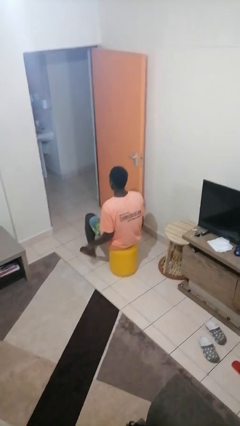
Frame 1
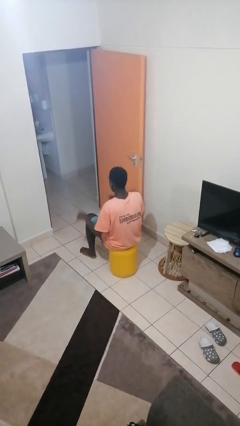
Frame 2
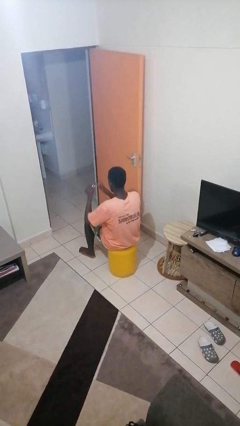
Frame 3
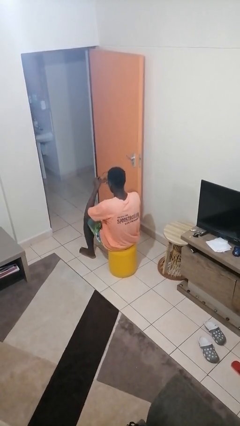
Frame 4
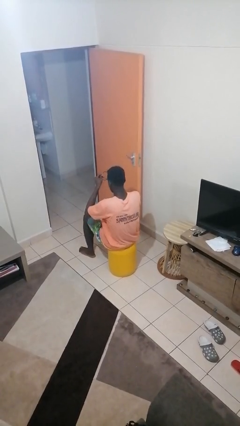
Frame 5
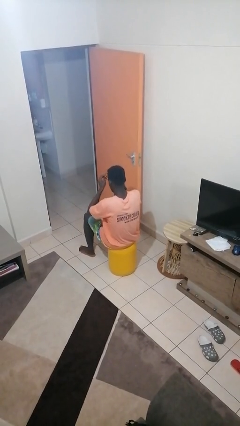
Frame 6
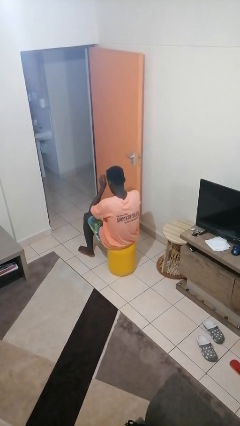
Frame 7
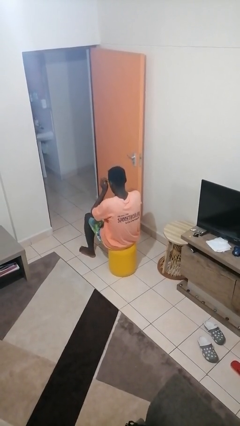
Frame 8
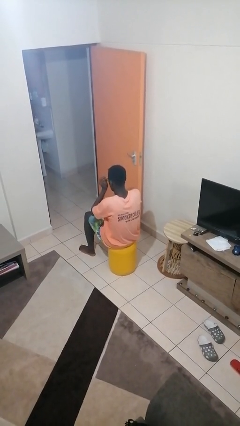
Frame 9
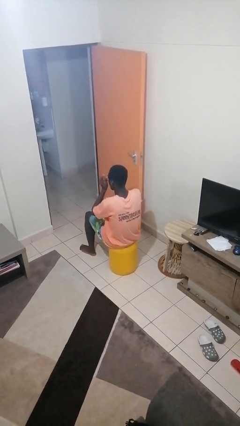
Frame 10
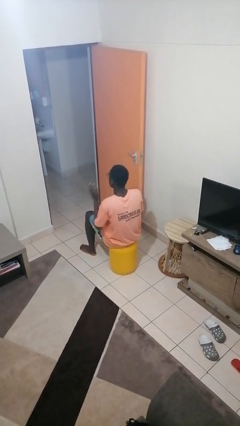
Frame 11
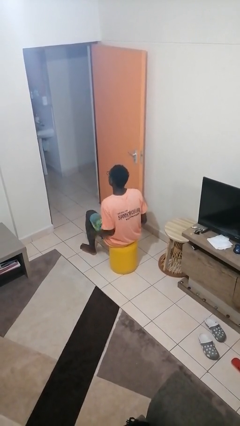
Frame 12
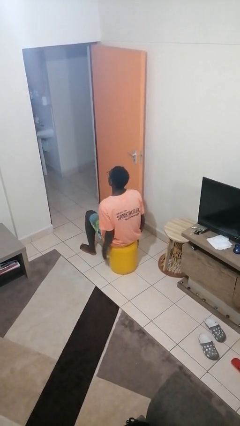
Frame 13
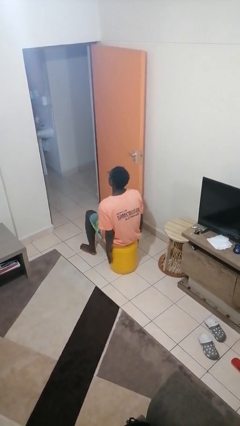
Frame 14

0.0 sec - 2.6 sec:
person puts on glasses

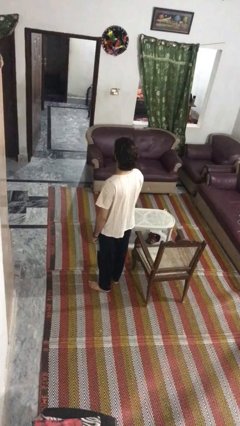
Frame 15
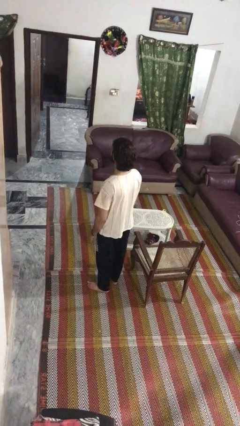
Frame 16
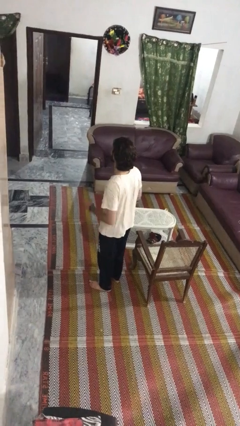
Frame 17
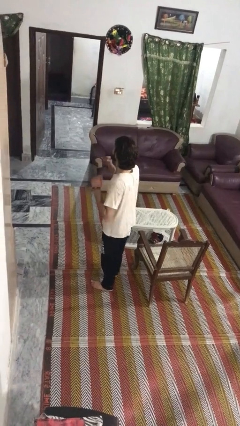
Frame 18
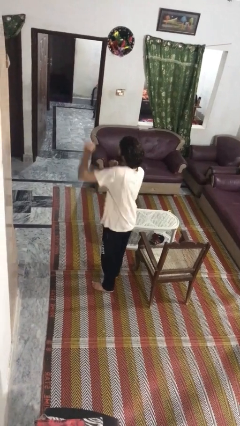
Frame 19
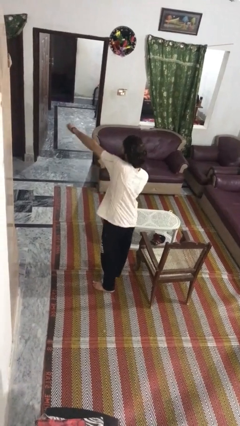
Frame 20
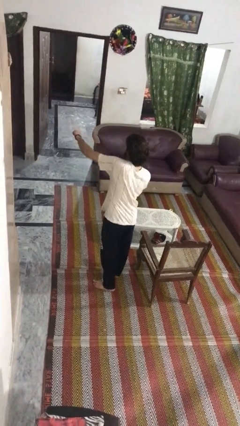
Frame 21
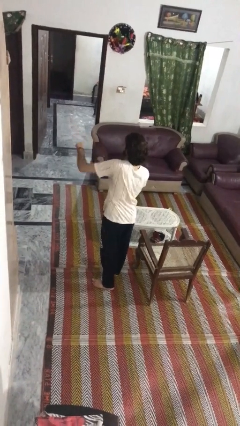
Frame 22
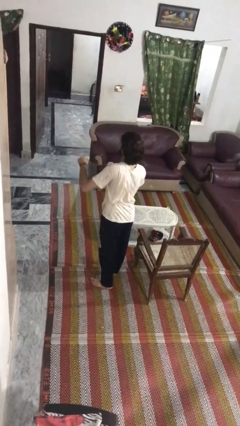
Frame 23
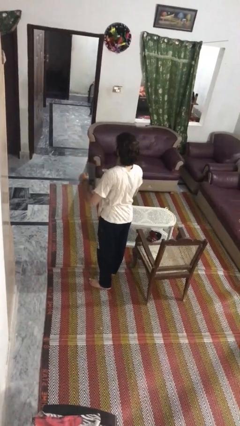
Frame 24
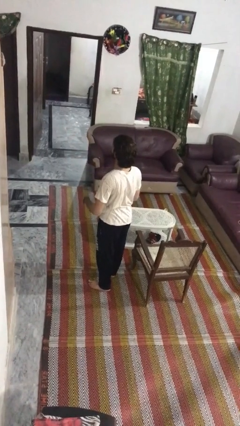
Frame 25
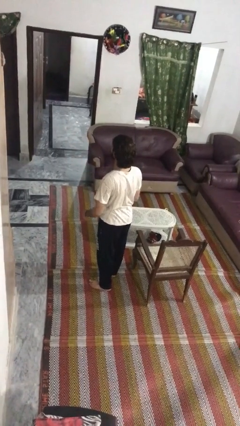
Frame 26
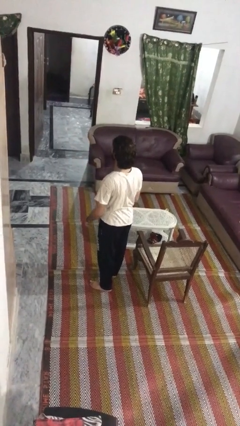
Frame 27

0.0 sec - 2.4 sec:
person punches

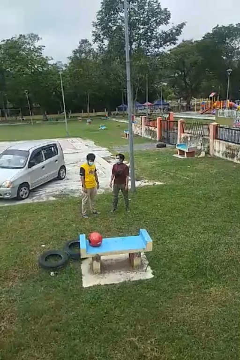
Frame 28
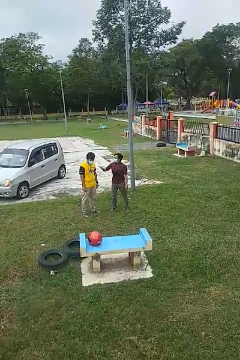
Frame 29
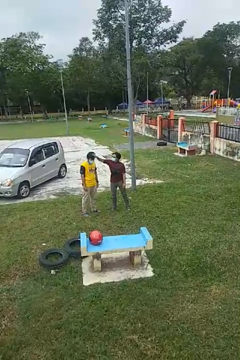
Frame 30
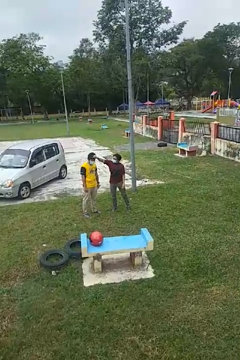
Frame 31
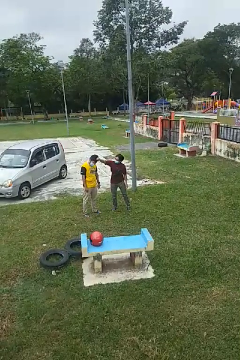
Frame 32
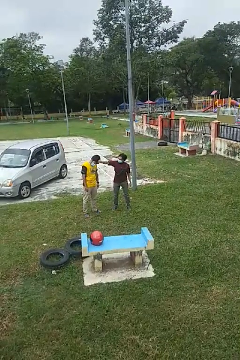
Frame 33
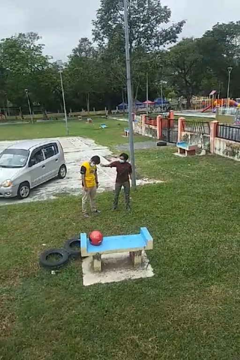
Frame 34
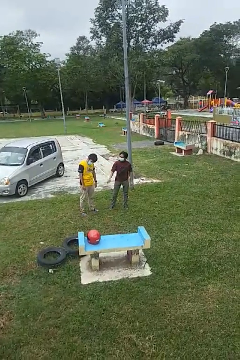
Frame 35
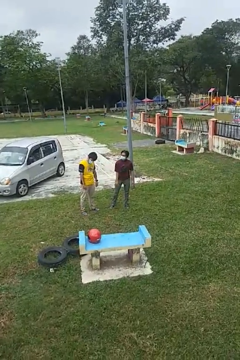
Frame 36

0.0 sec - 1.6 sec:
person grabs person by hair

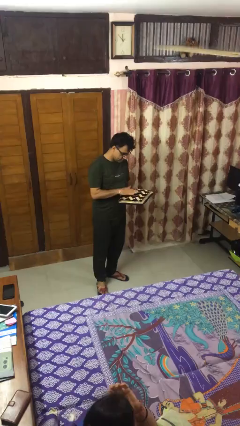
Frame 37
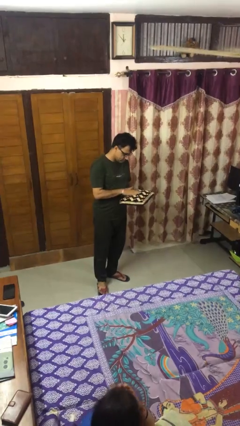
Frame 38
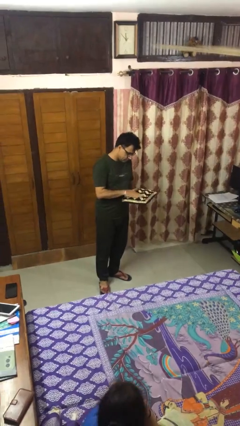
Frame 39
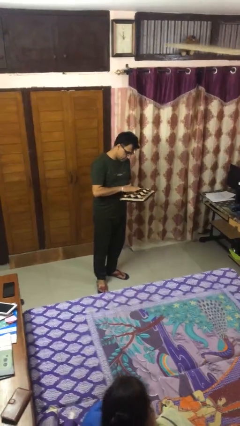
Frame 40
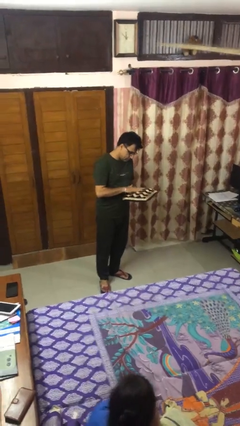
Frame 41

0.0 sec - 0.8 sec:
person waves hand over object

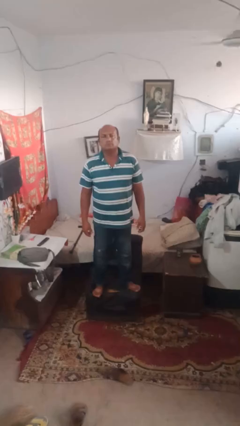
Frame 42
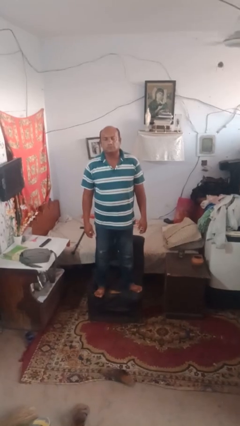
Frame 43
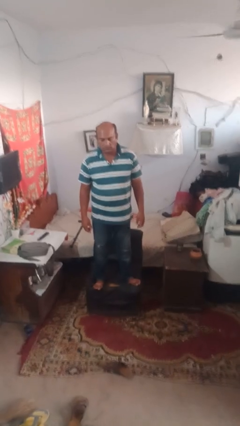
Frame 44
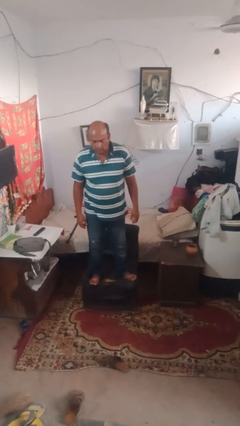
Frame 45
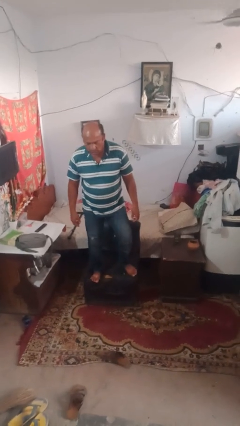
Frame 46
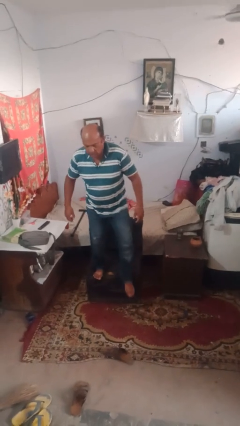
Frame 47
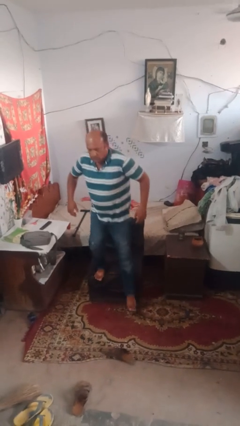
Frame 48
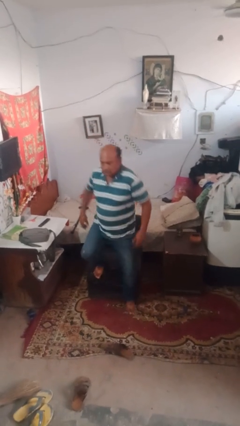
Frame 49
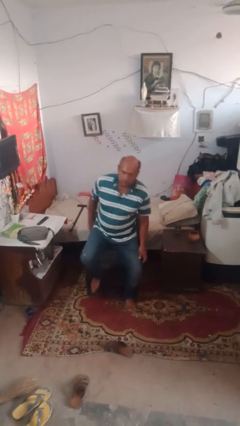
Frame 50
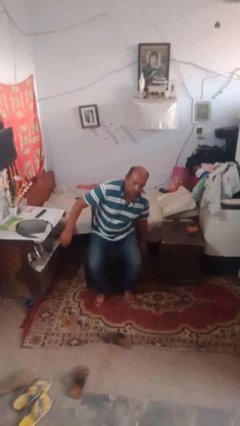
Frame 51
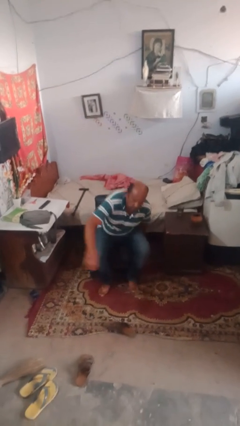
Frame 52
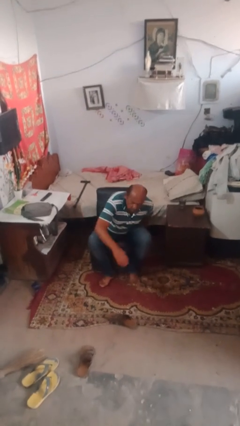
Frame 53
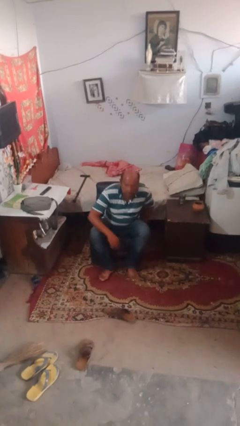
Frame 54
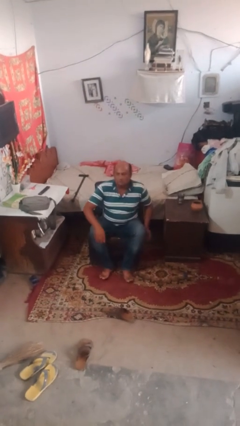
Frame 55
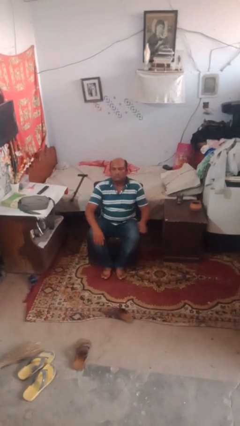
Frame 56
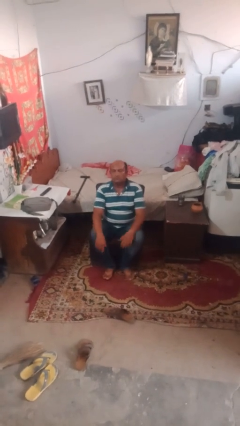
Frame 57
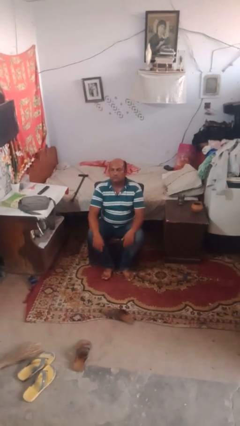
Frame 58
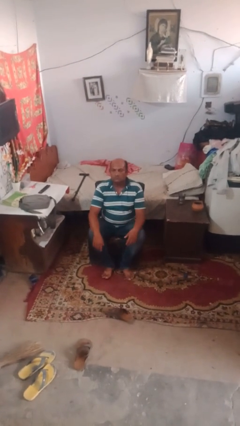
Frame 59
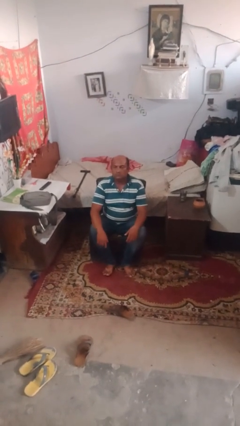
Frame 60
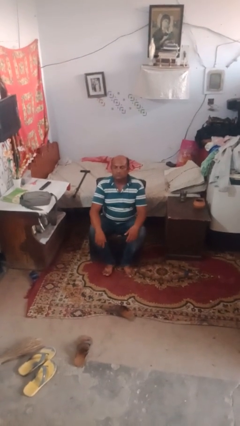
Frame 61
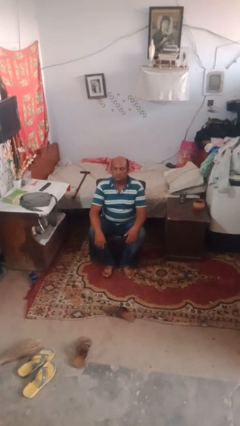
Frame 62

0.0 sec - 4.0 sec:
person lies down on couch

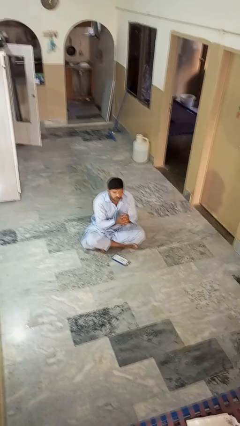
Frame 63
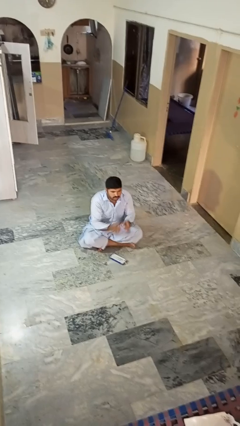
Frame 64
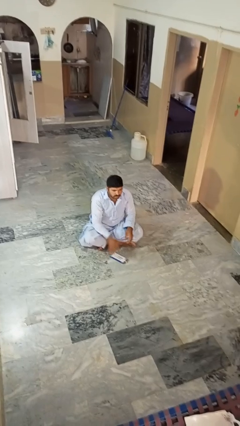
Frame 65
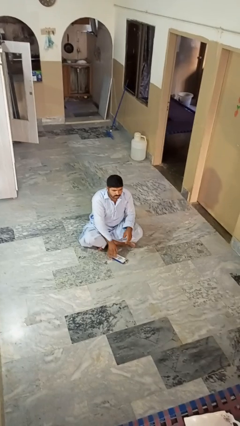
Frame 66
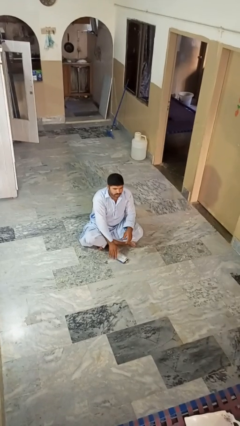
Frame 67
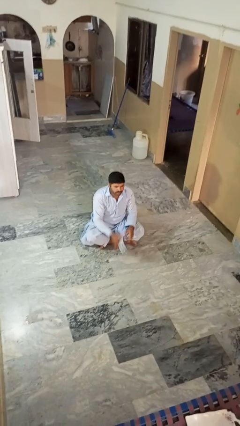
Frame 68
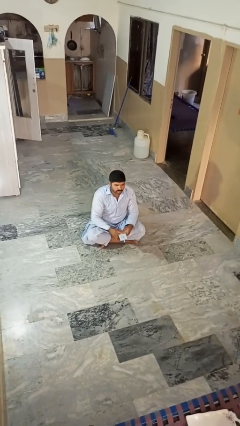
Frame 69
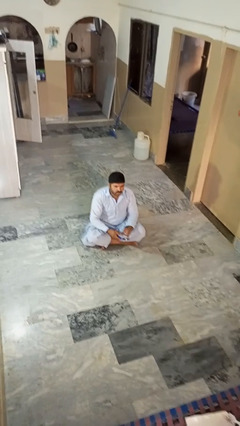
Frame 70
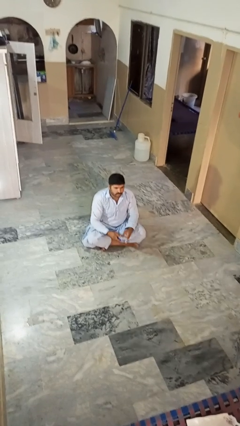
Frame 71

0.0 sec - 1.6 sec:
person picks up object from floor

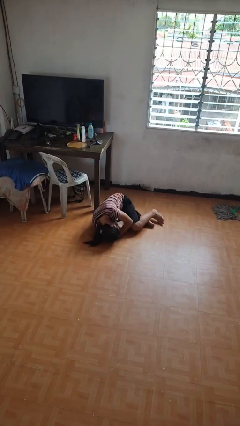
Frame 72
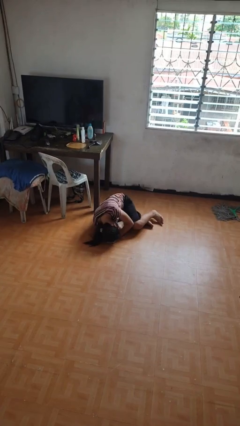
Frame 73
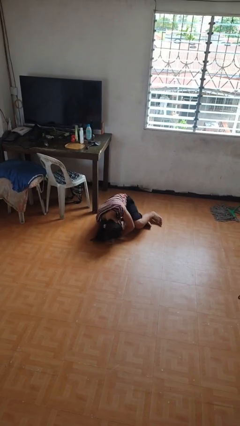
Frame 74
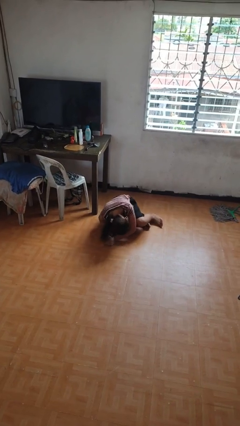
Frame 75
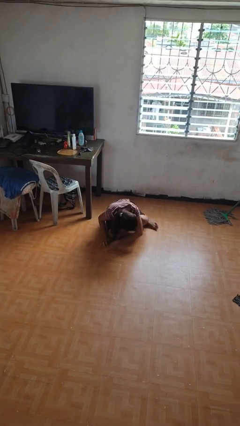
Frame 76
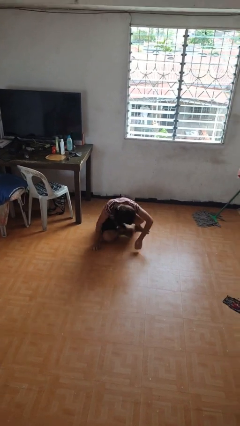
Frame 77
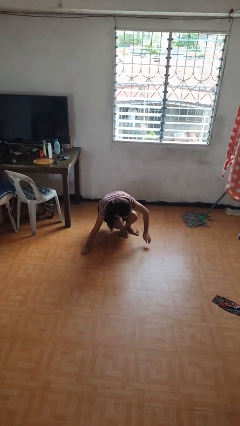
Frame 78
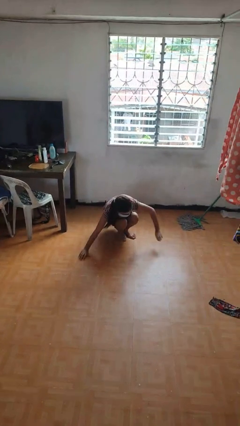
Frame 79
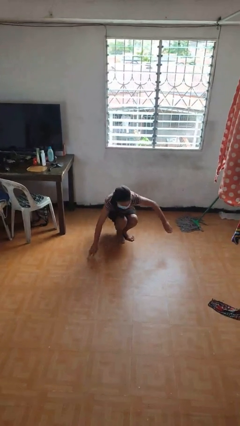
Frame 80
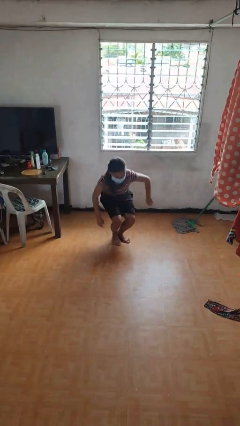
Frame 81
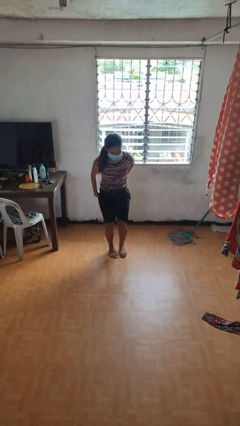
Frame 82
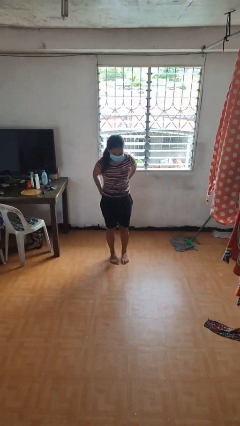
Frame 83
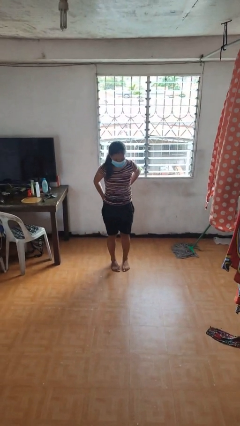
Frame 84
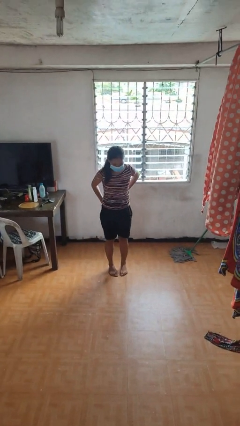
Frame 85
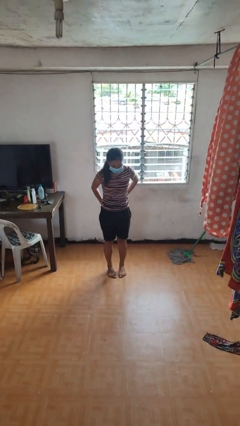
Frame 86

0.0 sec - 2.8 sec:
person stands up from floor

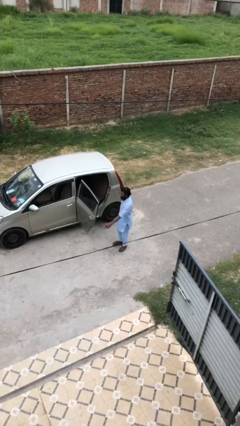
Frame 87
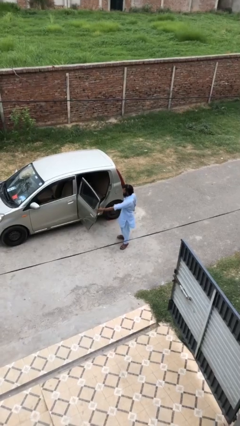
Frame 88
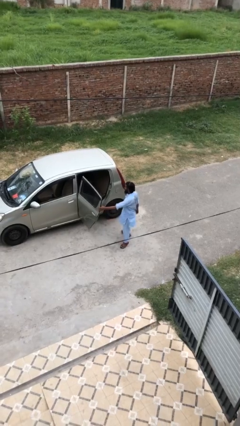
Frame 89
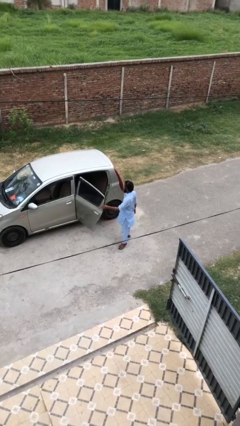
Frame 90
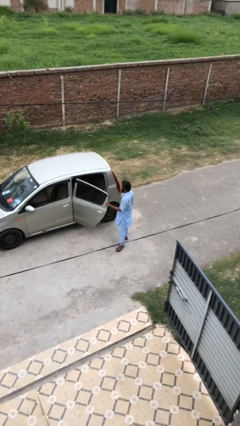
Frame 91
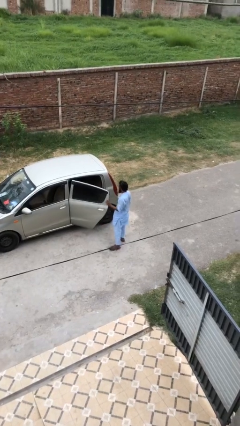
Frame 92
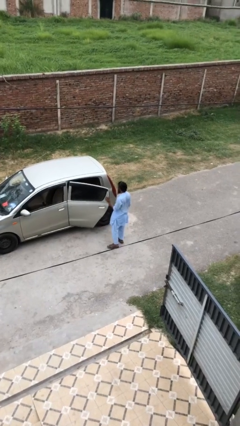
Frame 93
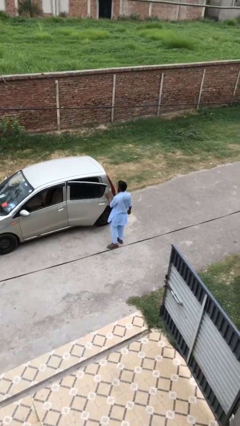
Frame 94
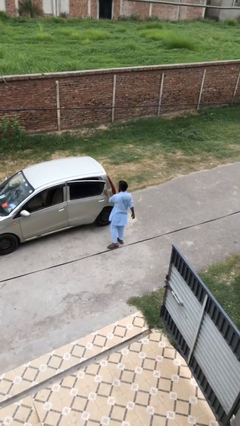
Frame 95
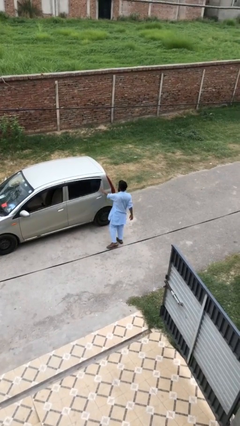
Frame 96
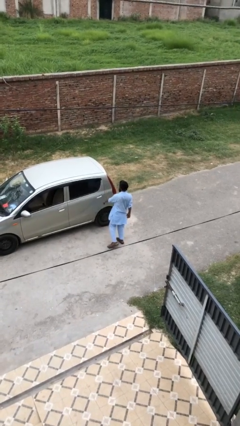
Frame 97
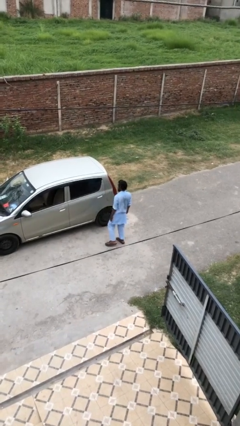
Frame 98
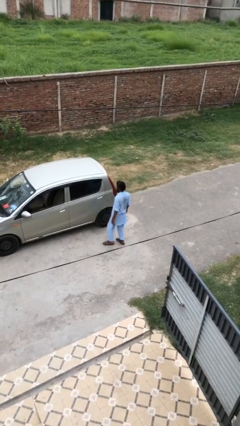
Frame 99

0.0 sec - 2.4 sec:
person closes car door
